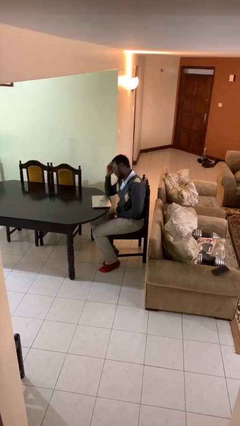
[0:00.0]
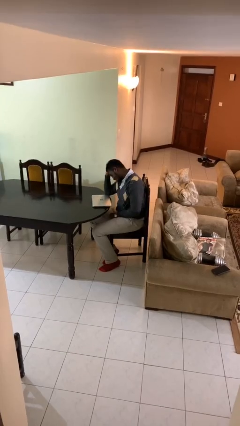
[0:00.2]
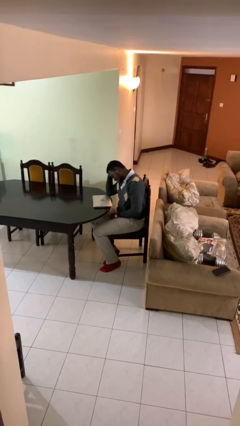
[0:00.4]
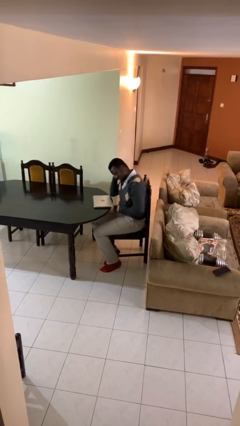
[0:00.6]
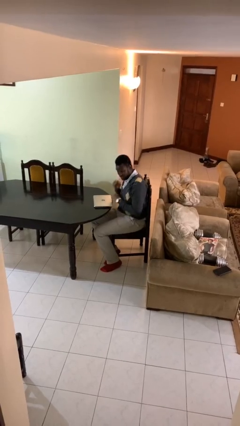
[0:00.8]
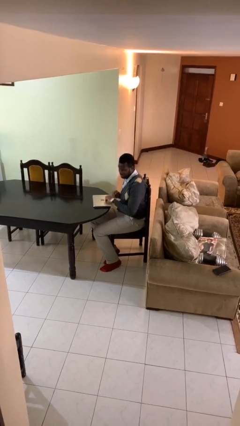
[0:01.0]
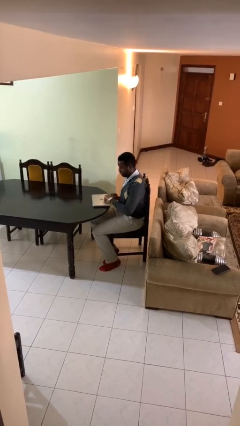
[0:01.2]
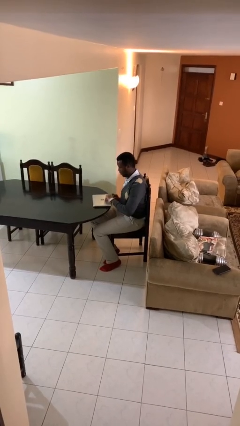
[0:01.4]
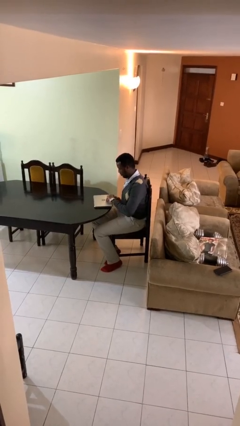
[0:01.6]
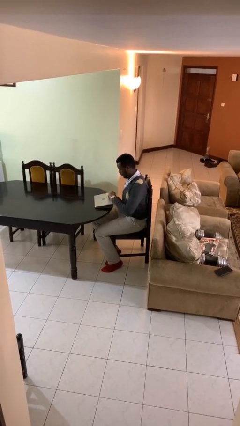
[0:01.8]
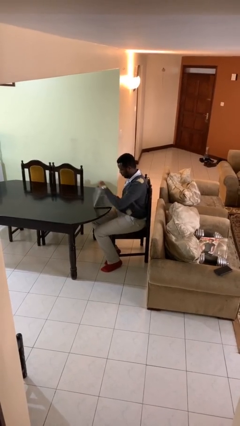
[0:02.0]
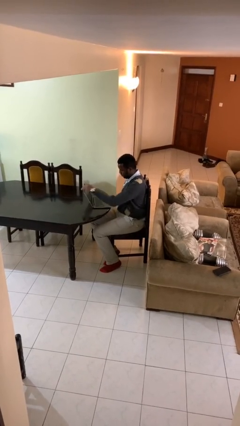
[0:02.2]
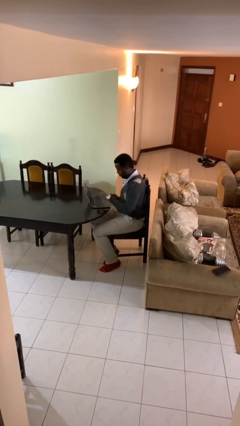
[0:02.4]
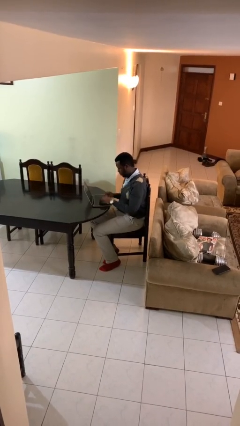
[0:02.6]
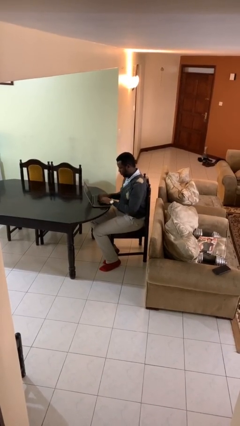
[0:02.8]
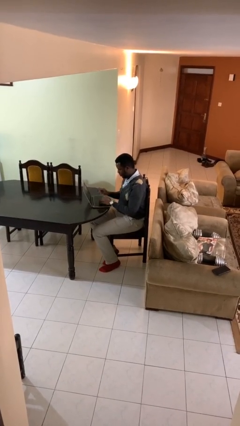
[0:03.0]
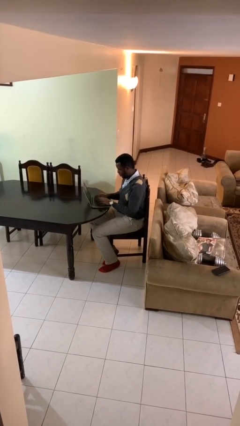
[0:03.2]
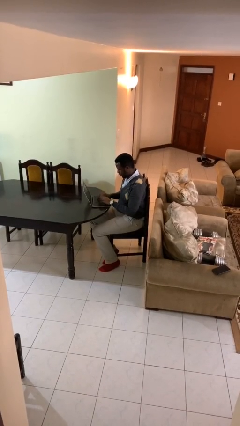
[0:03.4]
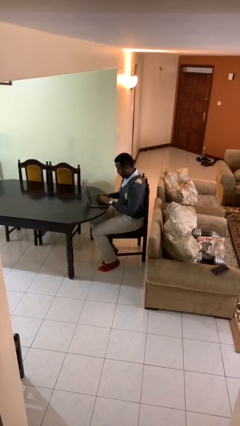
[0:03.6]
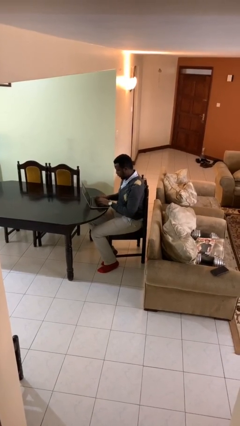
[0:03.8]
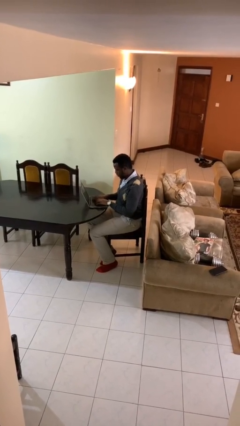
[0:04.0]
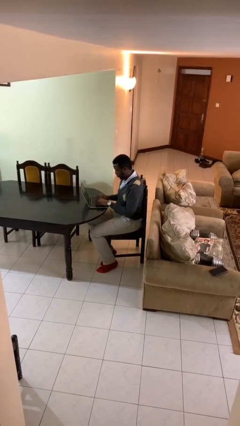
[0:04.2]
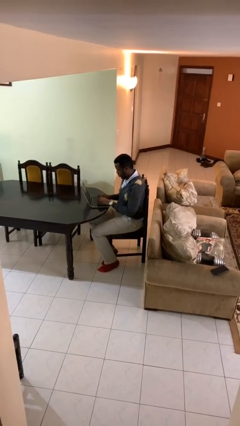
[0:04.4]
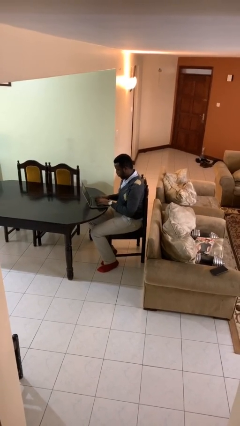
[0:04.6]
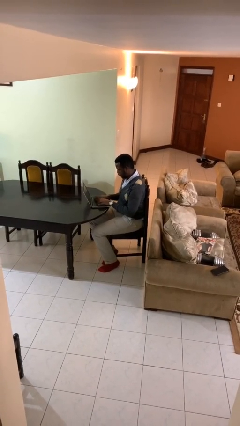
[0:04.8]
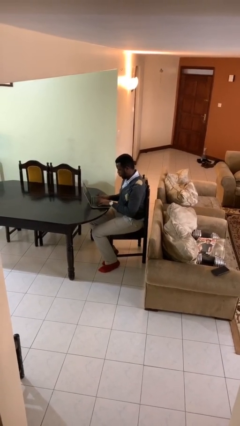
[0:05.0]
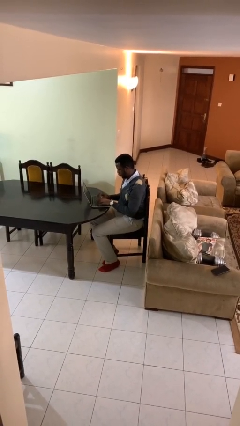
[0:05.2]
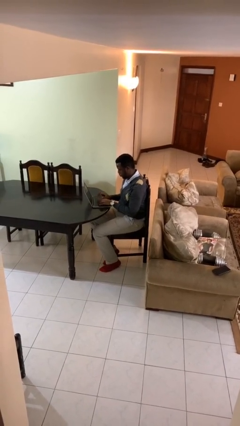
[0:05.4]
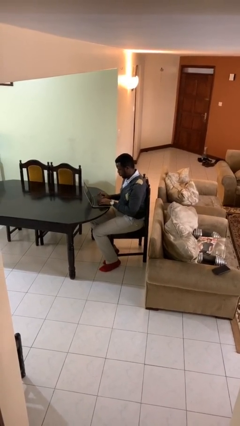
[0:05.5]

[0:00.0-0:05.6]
person interacts with laptop

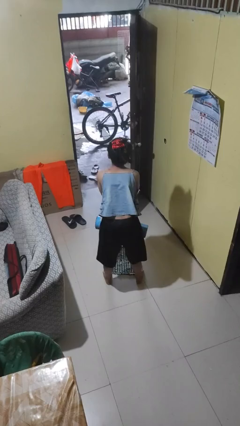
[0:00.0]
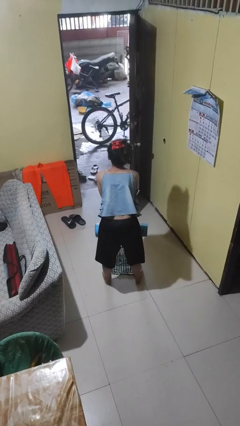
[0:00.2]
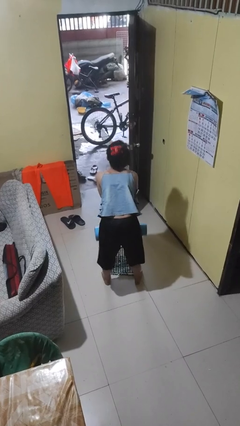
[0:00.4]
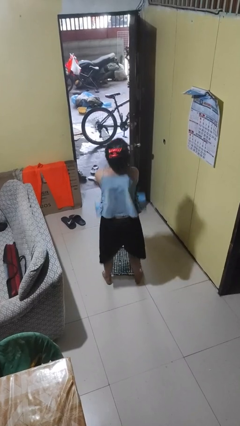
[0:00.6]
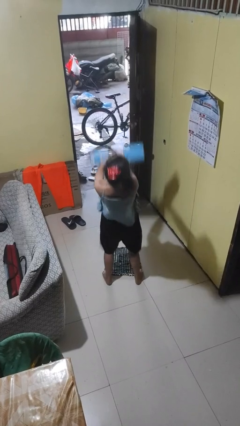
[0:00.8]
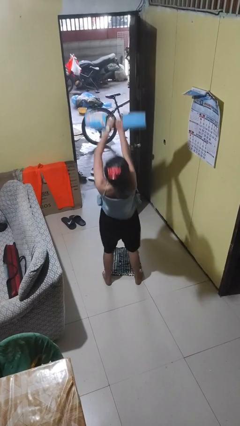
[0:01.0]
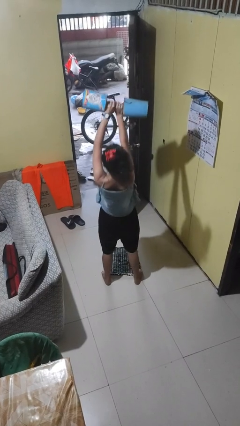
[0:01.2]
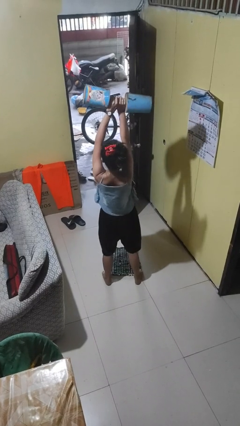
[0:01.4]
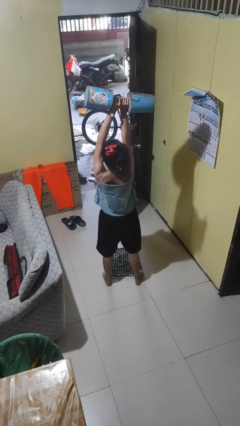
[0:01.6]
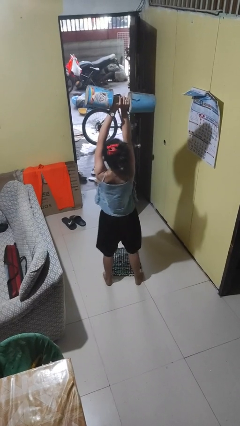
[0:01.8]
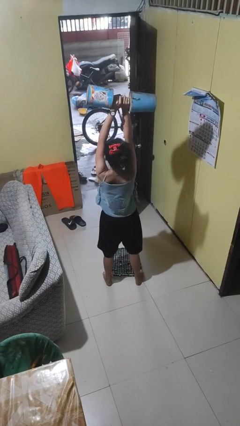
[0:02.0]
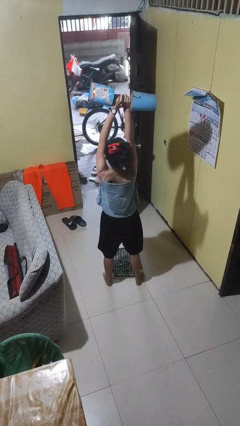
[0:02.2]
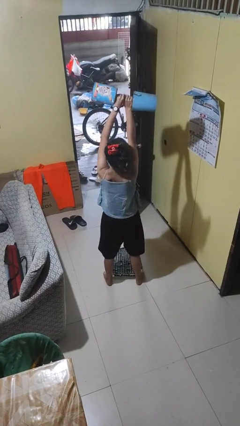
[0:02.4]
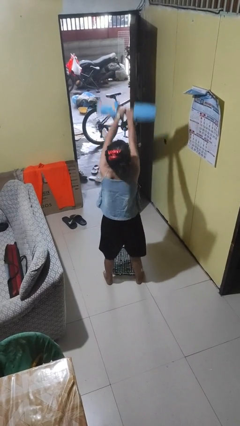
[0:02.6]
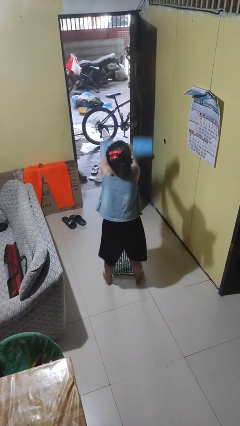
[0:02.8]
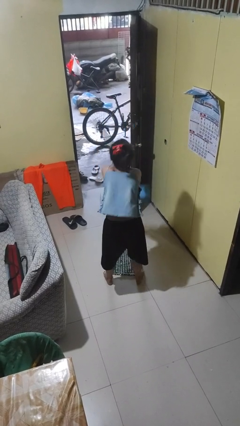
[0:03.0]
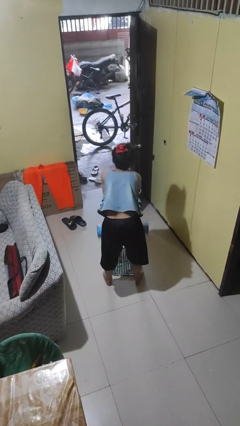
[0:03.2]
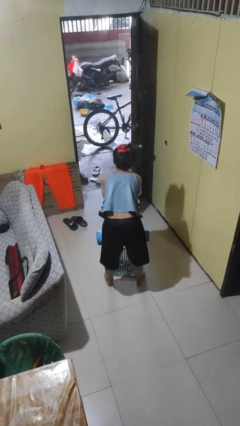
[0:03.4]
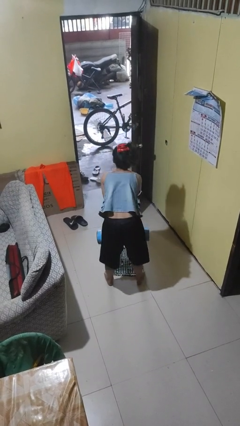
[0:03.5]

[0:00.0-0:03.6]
person lifts dumbbells

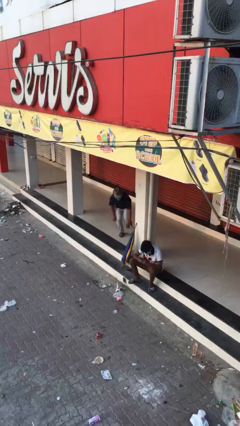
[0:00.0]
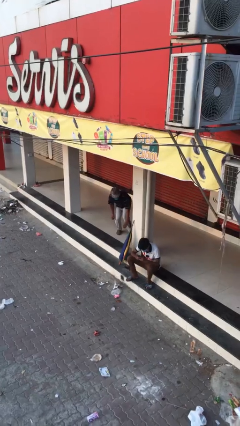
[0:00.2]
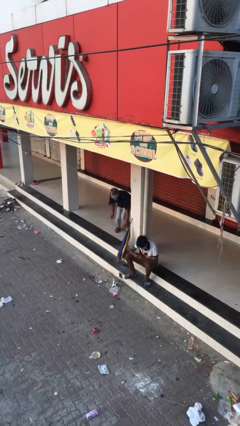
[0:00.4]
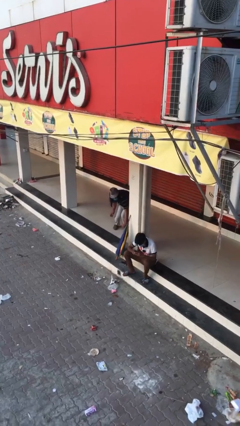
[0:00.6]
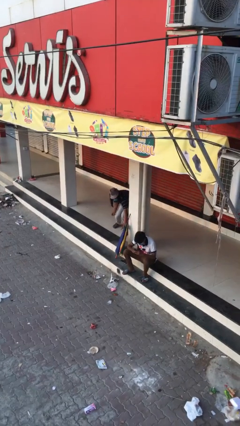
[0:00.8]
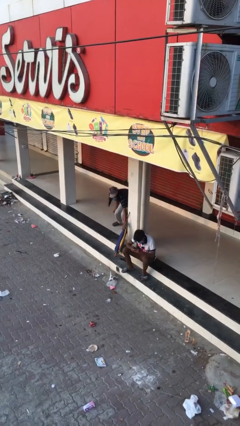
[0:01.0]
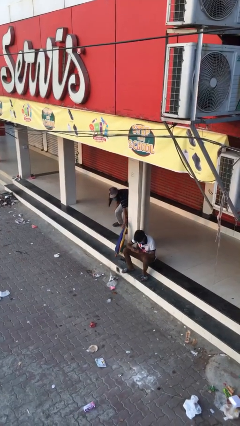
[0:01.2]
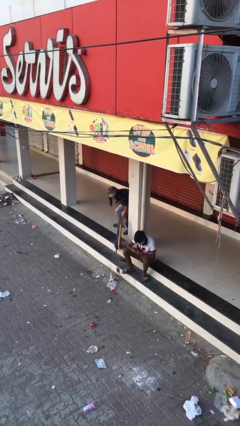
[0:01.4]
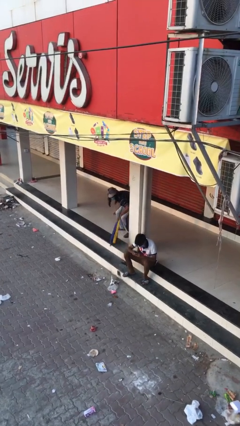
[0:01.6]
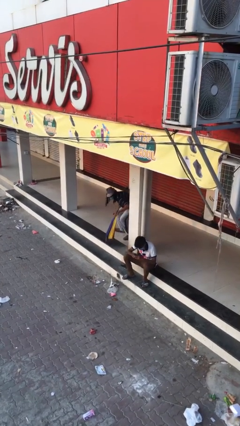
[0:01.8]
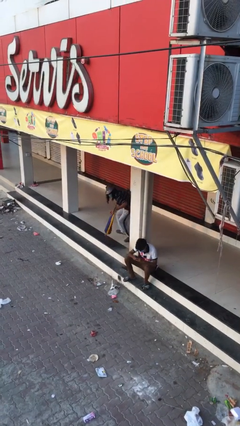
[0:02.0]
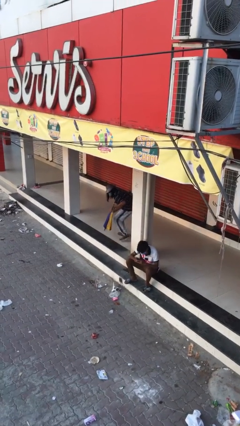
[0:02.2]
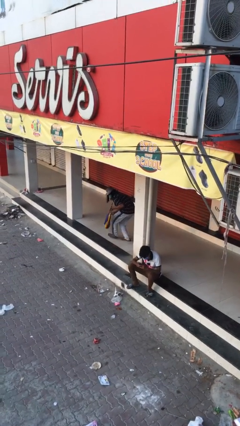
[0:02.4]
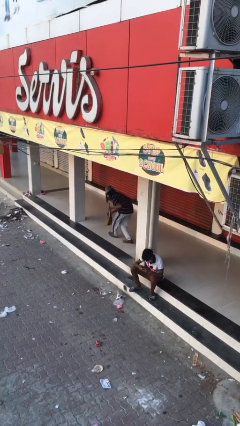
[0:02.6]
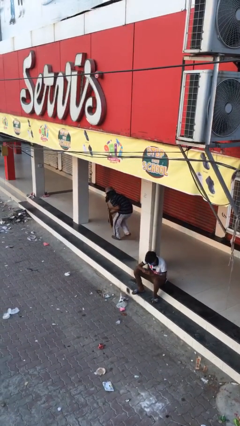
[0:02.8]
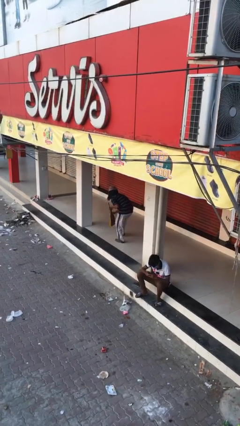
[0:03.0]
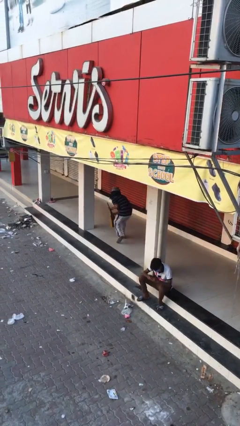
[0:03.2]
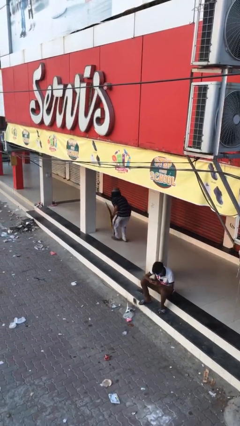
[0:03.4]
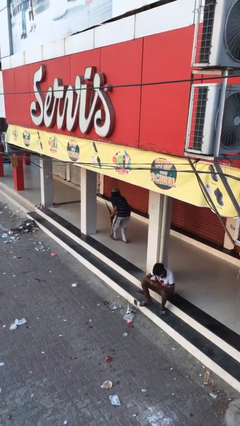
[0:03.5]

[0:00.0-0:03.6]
person steals object from person

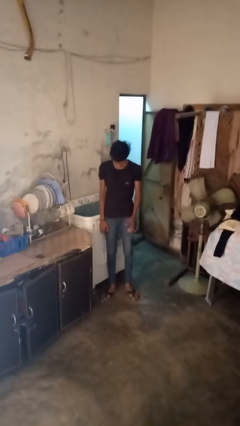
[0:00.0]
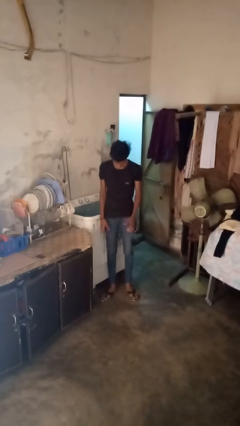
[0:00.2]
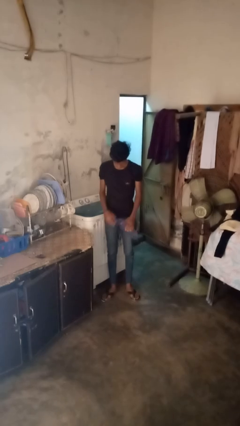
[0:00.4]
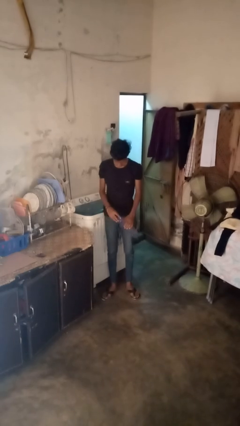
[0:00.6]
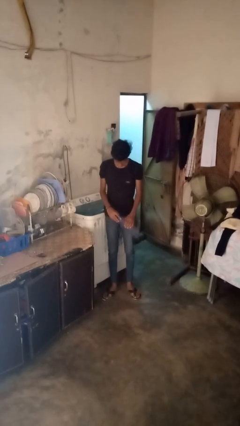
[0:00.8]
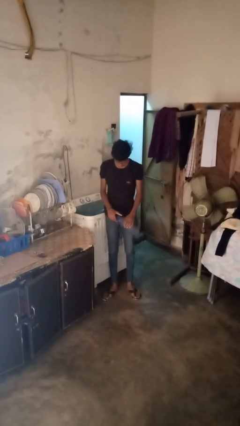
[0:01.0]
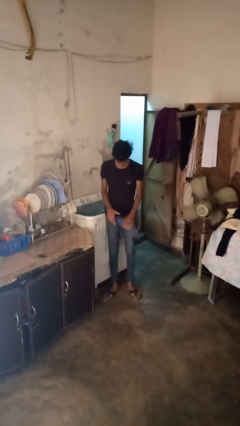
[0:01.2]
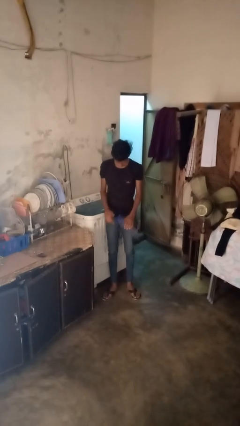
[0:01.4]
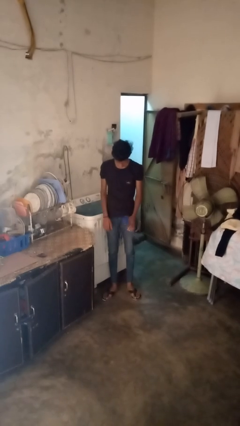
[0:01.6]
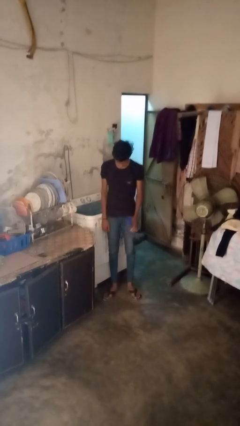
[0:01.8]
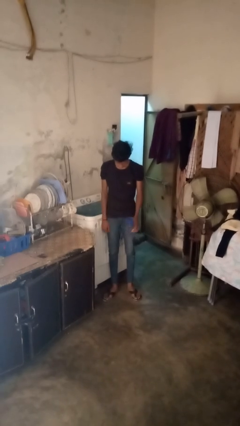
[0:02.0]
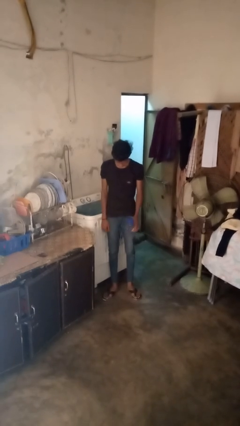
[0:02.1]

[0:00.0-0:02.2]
person screws lid to bottle

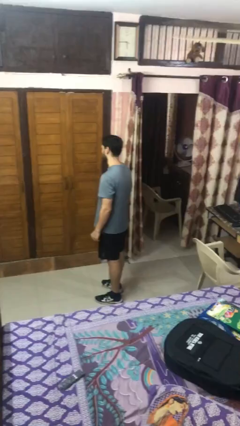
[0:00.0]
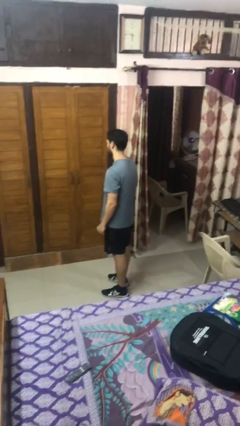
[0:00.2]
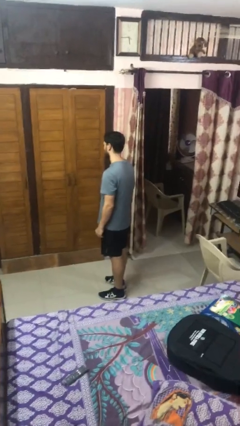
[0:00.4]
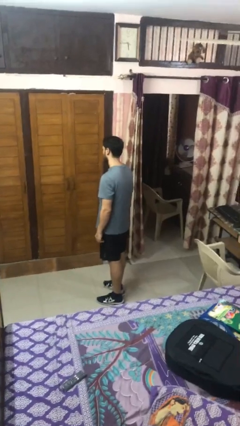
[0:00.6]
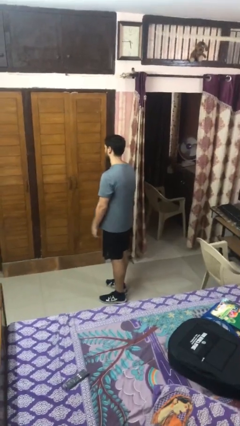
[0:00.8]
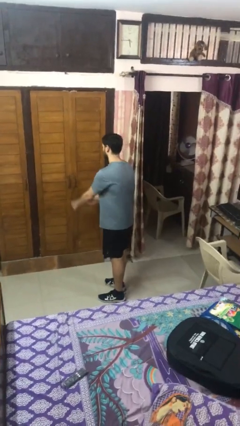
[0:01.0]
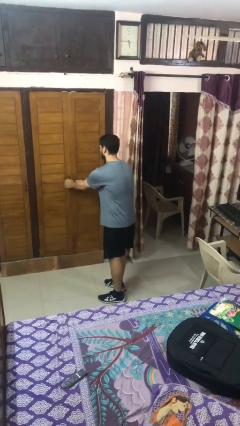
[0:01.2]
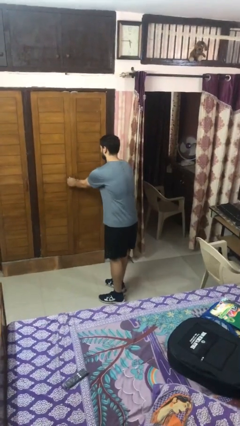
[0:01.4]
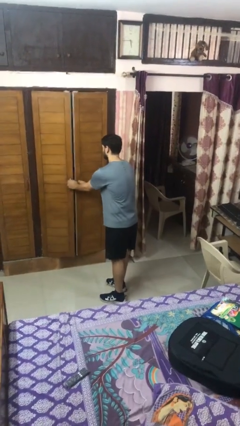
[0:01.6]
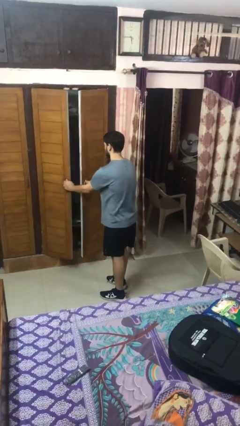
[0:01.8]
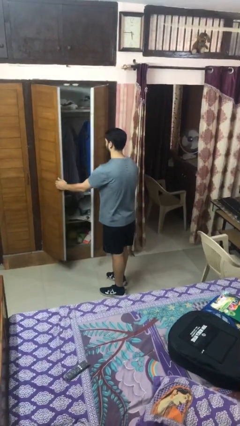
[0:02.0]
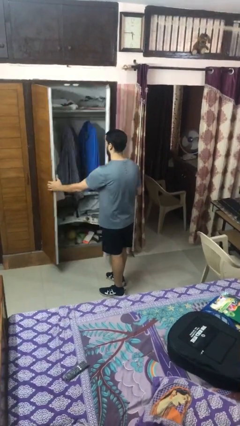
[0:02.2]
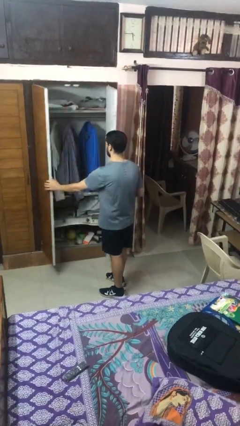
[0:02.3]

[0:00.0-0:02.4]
person opens closet door

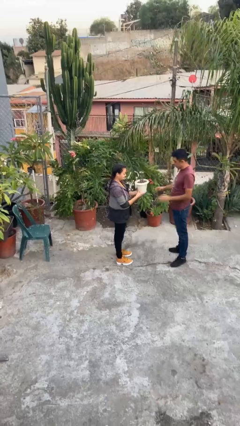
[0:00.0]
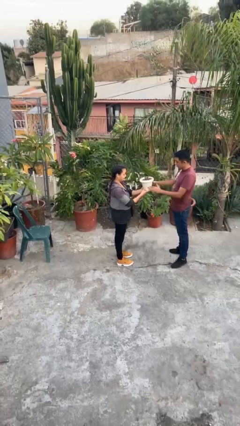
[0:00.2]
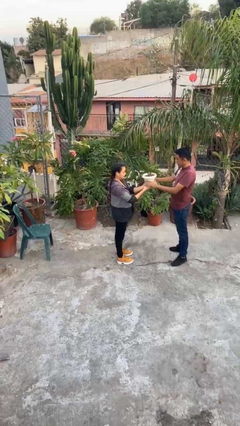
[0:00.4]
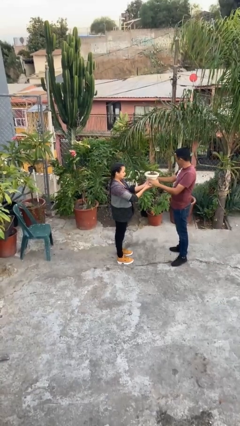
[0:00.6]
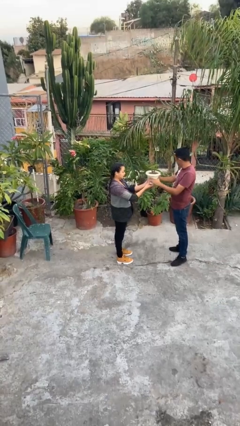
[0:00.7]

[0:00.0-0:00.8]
person transfers object to person
